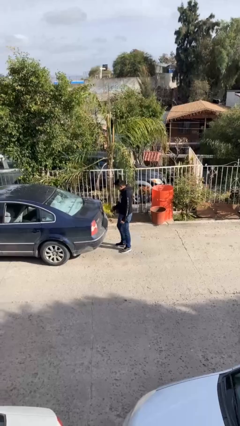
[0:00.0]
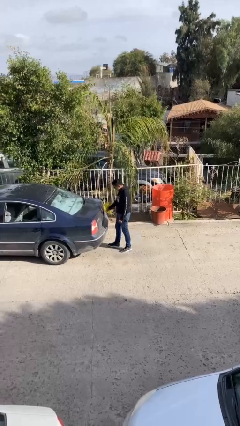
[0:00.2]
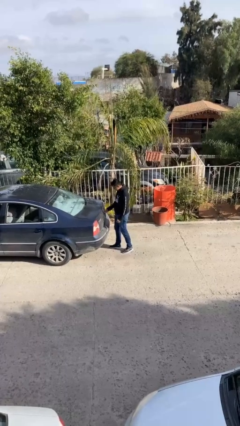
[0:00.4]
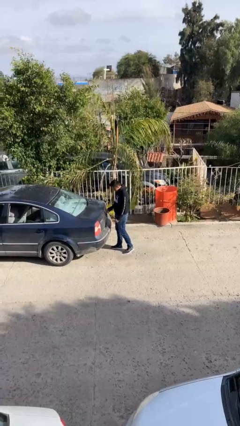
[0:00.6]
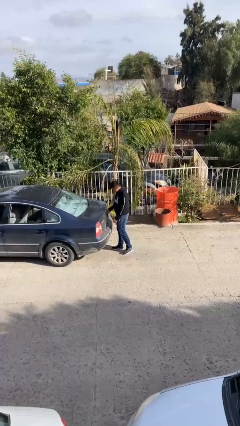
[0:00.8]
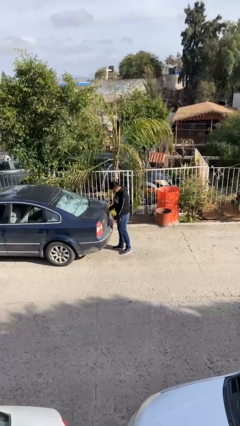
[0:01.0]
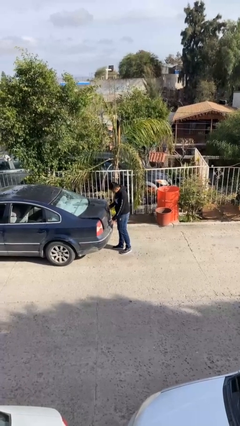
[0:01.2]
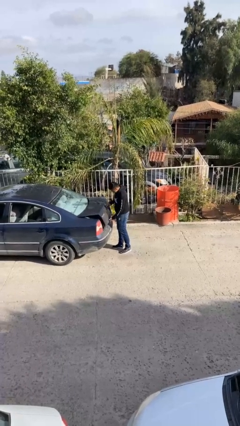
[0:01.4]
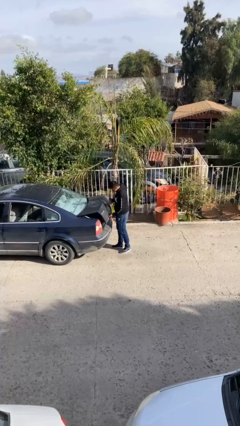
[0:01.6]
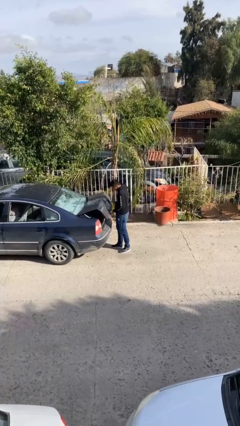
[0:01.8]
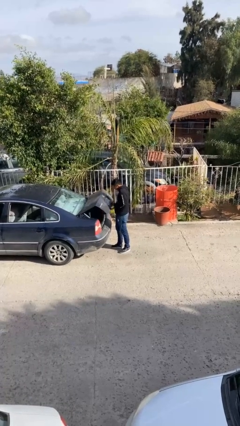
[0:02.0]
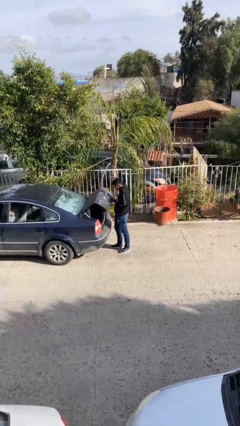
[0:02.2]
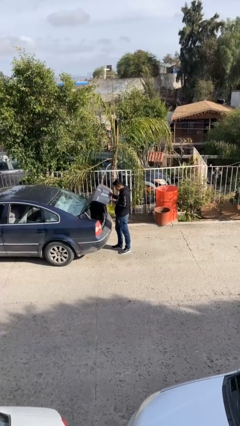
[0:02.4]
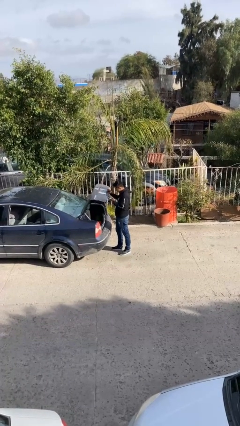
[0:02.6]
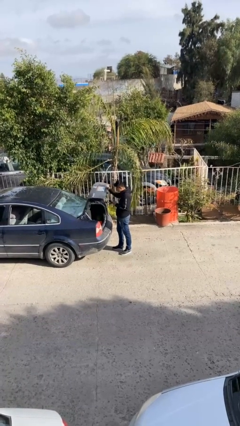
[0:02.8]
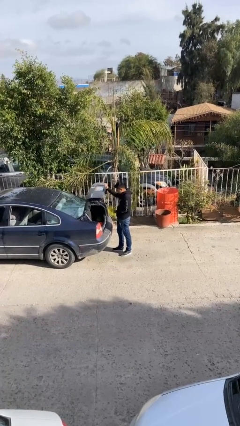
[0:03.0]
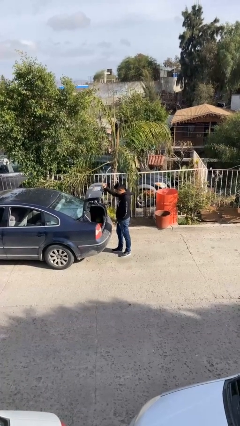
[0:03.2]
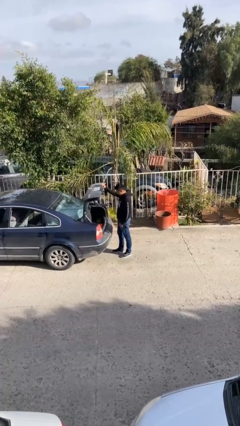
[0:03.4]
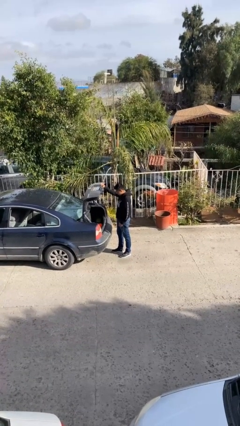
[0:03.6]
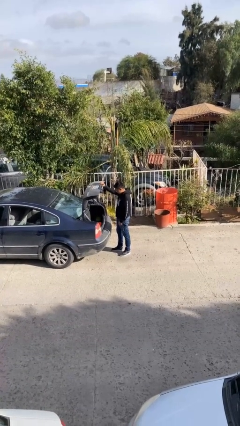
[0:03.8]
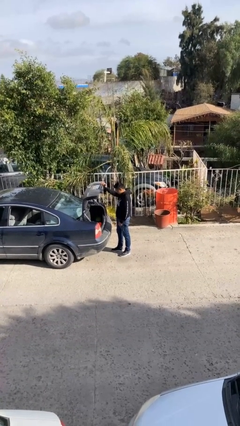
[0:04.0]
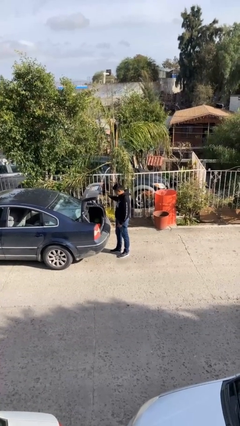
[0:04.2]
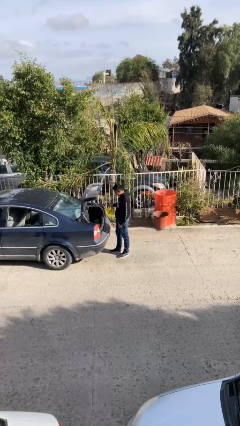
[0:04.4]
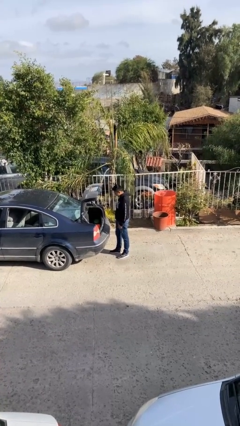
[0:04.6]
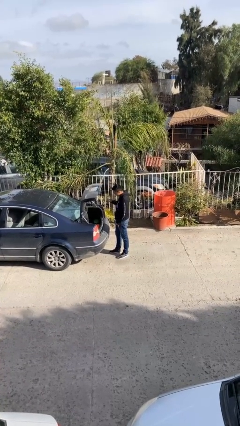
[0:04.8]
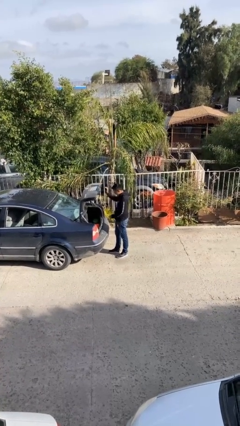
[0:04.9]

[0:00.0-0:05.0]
person opens car trunk

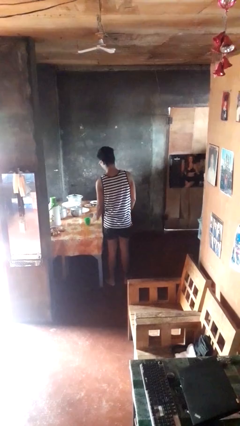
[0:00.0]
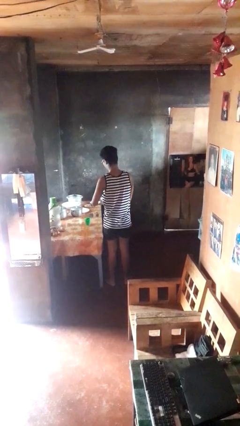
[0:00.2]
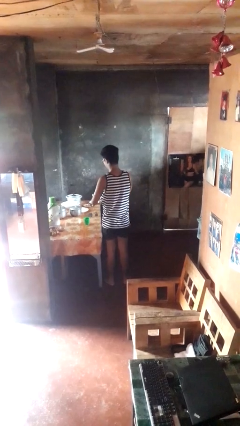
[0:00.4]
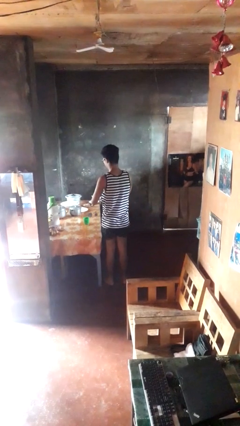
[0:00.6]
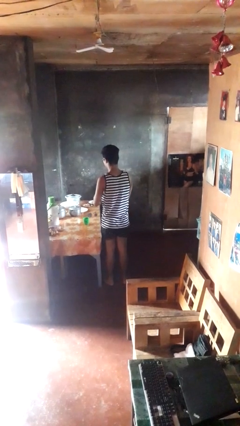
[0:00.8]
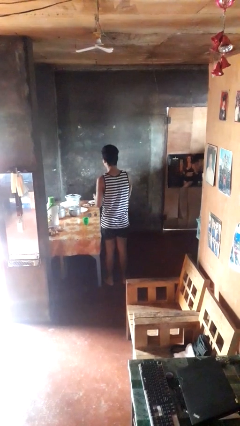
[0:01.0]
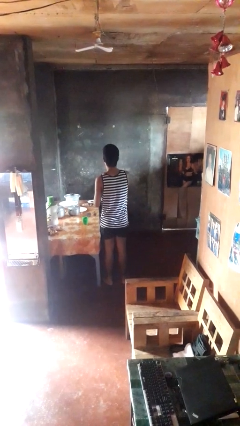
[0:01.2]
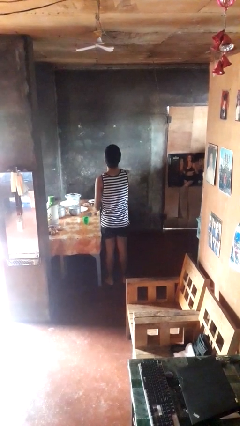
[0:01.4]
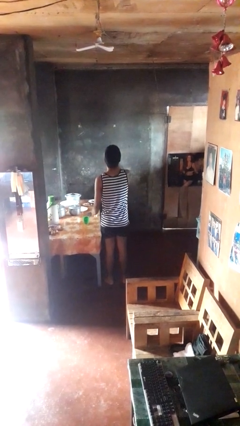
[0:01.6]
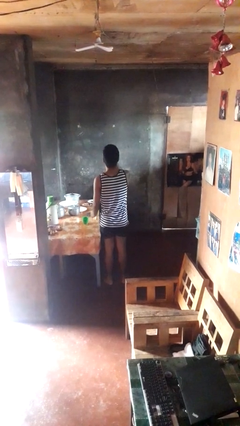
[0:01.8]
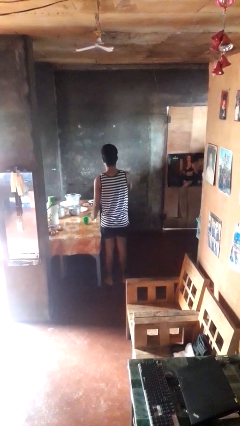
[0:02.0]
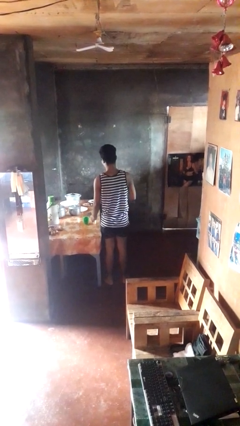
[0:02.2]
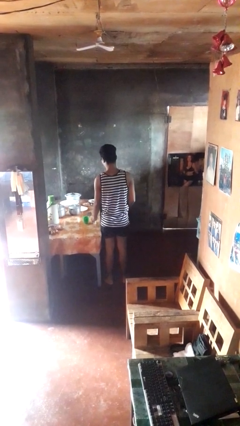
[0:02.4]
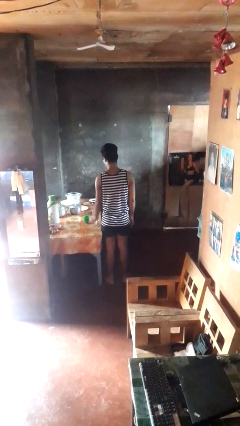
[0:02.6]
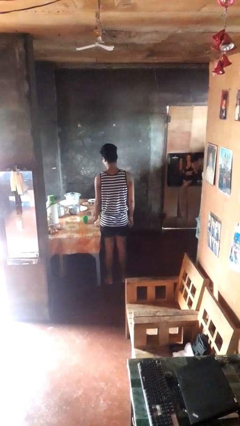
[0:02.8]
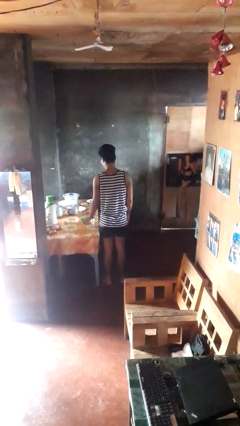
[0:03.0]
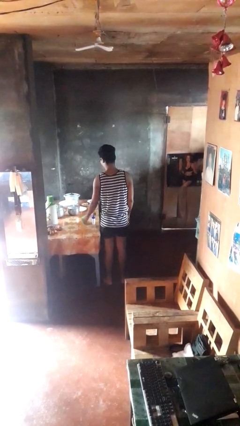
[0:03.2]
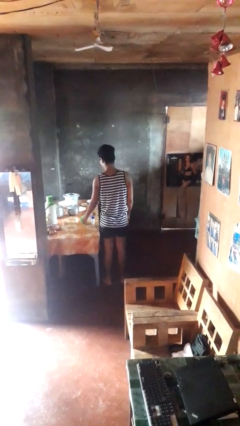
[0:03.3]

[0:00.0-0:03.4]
person takes medicine pills

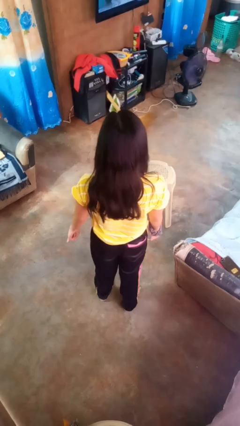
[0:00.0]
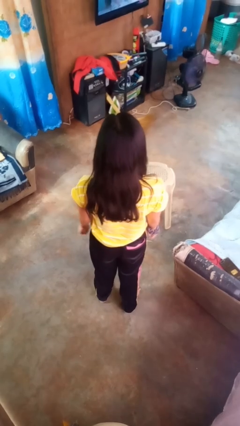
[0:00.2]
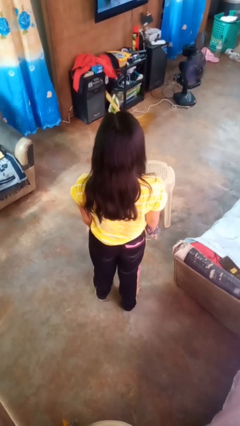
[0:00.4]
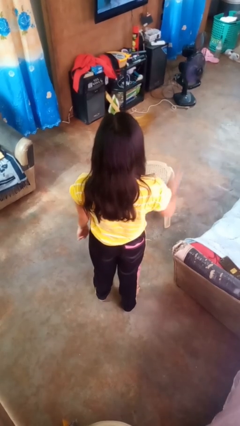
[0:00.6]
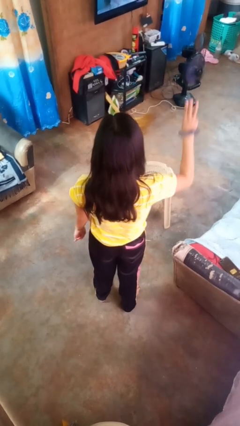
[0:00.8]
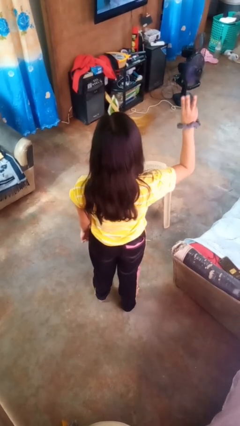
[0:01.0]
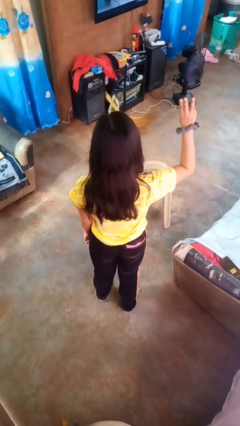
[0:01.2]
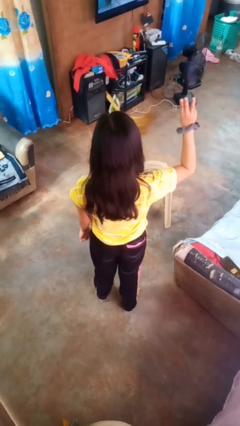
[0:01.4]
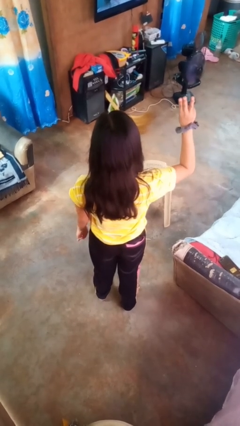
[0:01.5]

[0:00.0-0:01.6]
person gestures number three

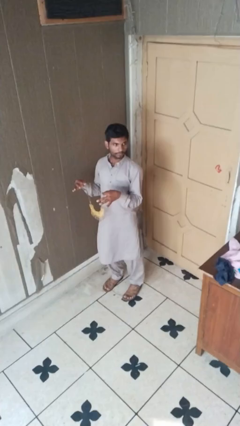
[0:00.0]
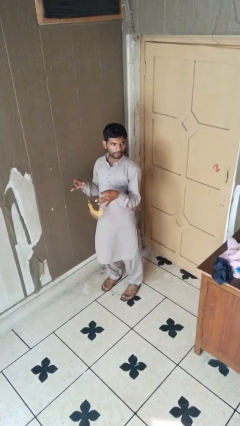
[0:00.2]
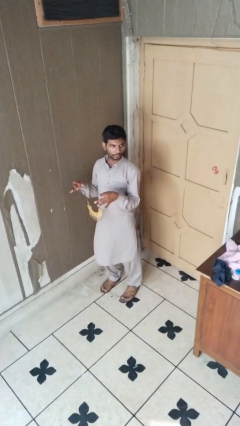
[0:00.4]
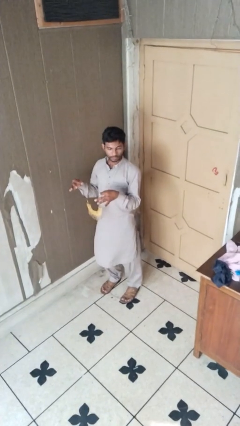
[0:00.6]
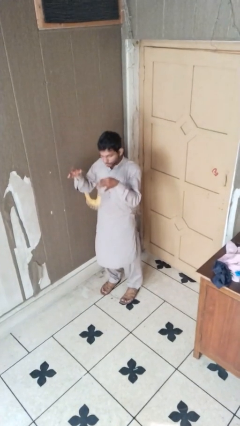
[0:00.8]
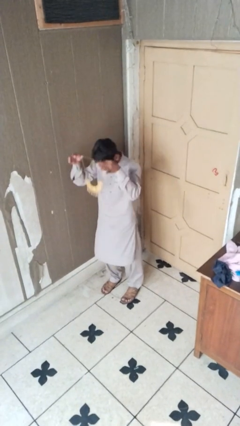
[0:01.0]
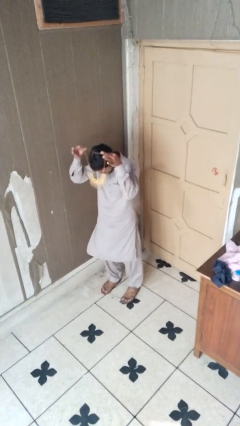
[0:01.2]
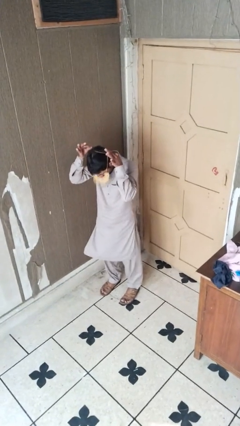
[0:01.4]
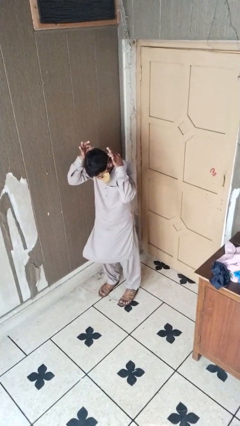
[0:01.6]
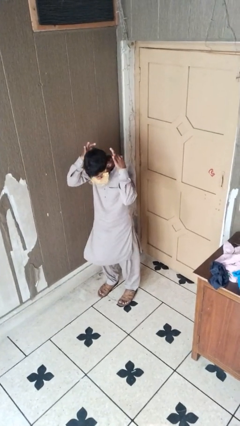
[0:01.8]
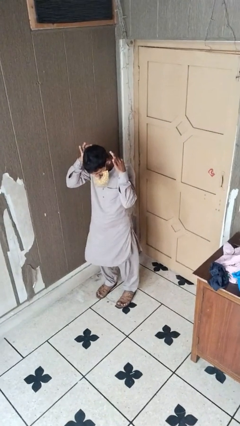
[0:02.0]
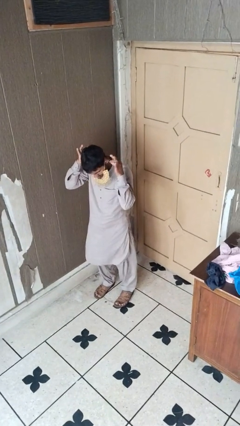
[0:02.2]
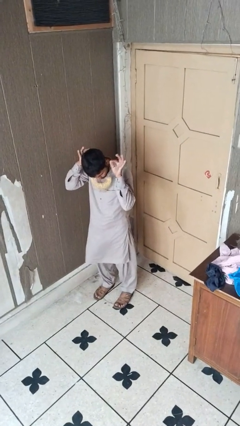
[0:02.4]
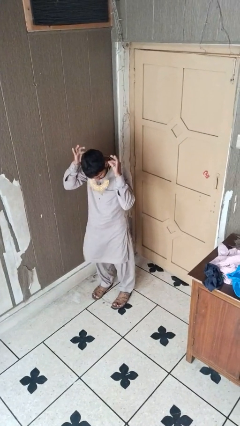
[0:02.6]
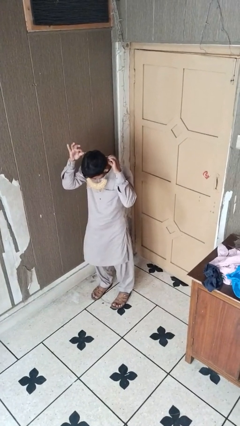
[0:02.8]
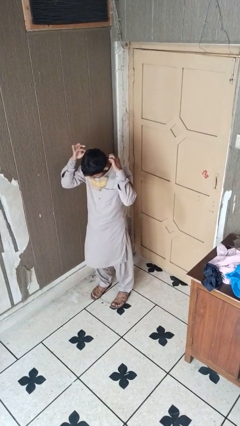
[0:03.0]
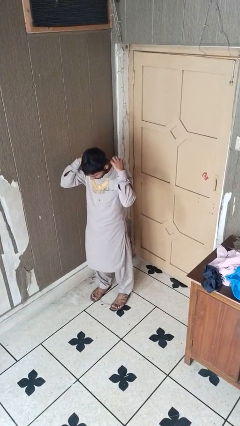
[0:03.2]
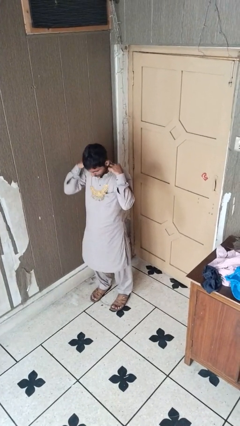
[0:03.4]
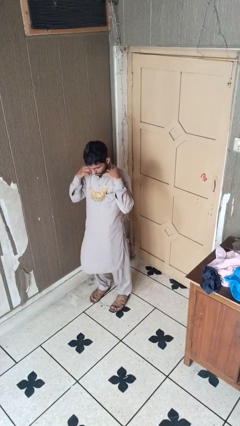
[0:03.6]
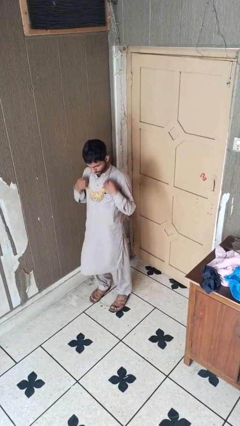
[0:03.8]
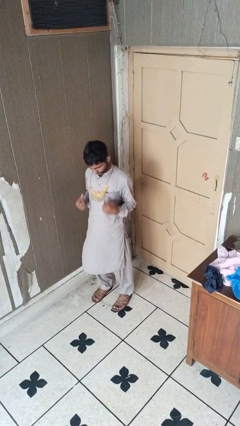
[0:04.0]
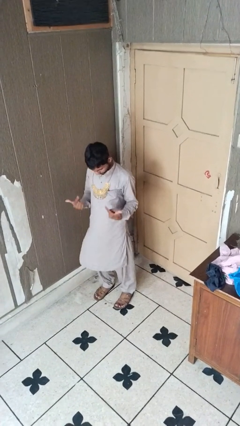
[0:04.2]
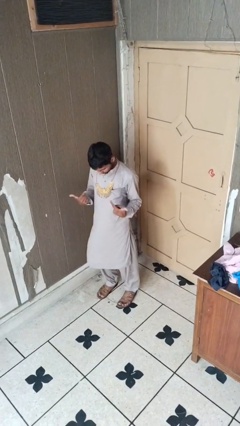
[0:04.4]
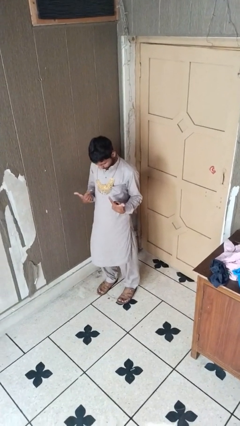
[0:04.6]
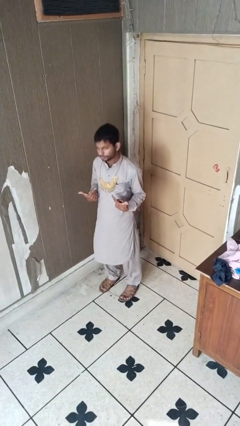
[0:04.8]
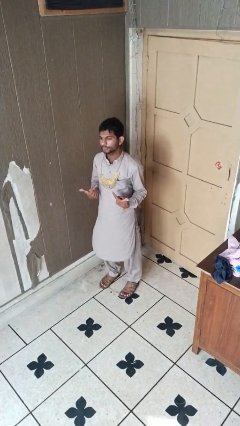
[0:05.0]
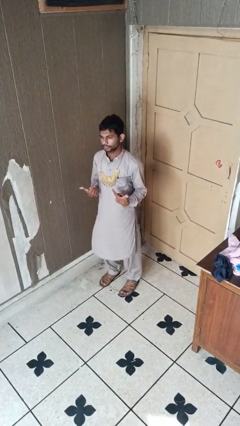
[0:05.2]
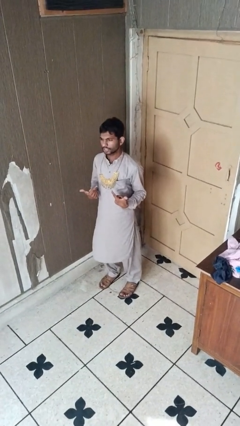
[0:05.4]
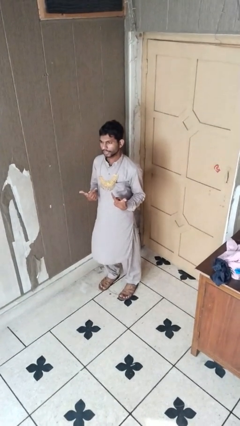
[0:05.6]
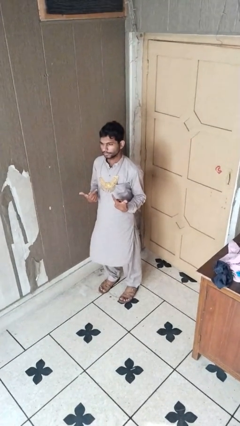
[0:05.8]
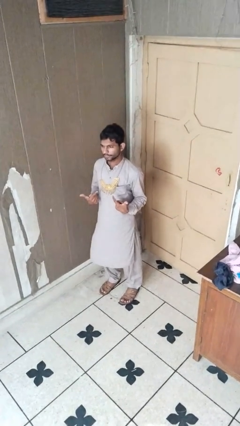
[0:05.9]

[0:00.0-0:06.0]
person puts on necklace

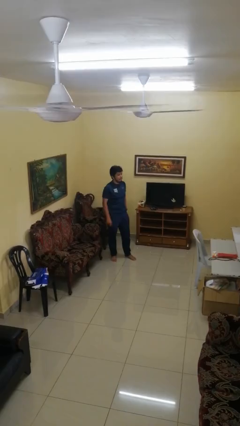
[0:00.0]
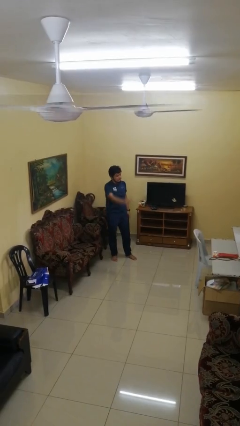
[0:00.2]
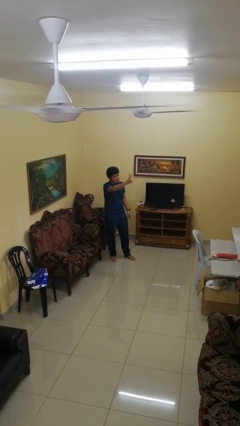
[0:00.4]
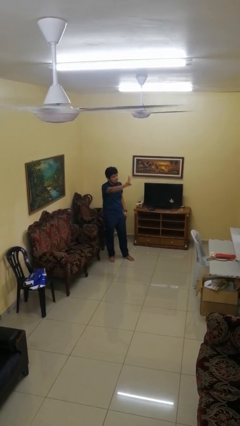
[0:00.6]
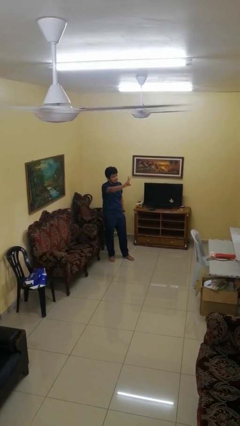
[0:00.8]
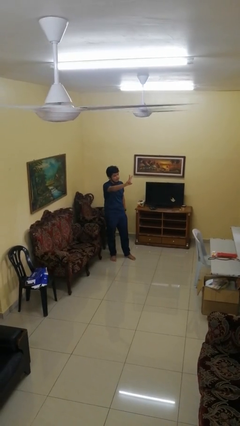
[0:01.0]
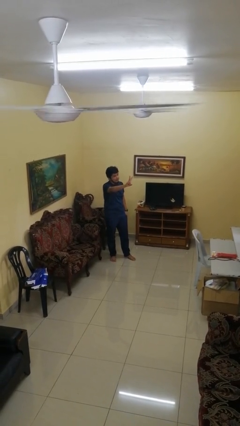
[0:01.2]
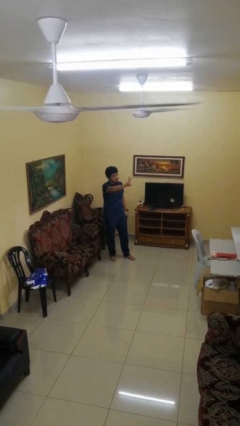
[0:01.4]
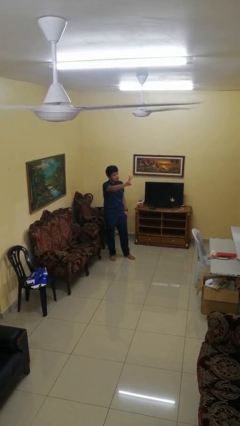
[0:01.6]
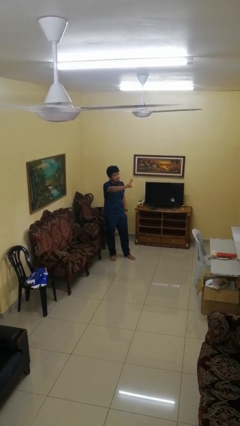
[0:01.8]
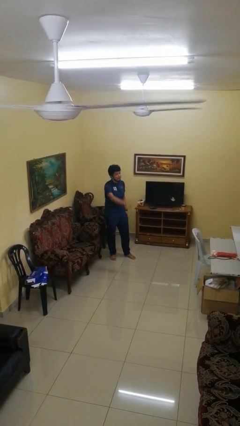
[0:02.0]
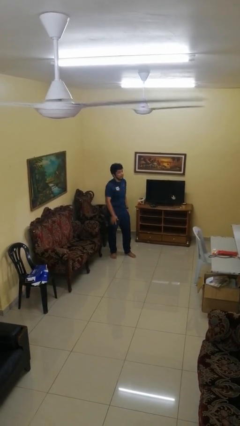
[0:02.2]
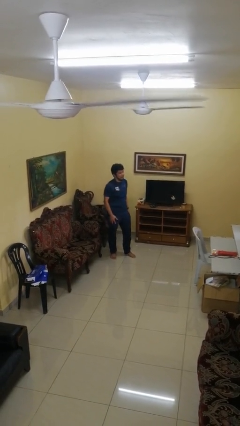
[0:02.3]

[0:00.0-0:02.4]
person gestures peace
